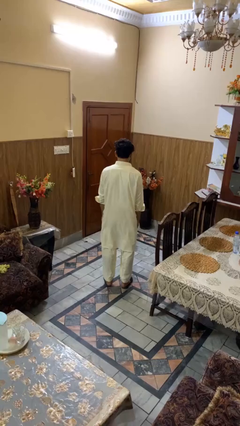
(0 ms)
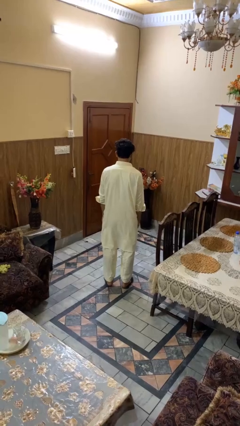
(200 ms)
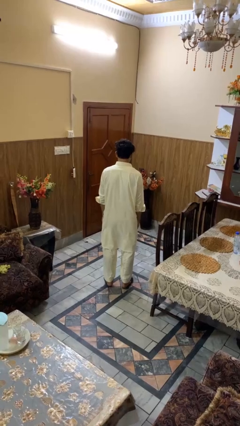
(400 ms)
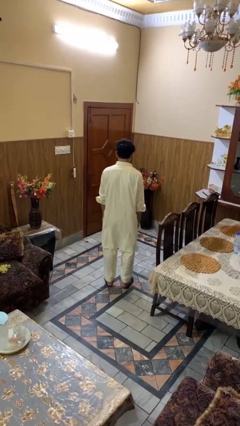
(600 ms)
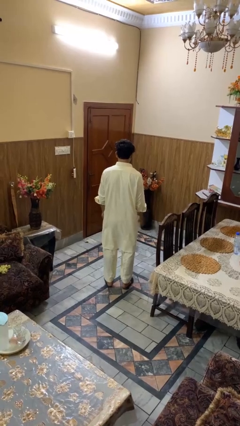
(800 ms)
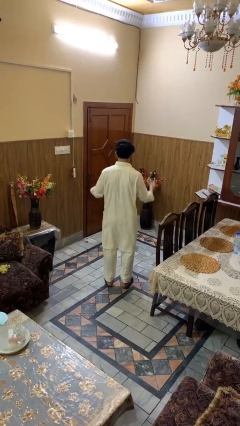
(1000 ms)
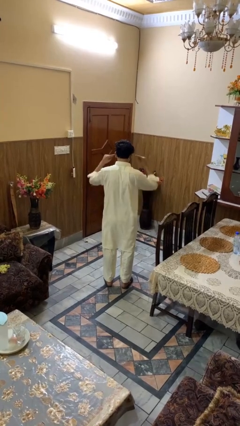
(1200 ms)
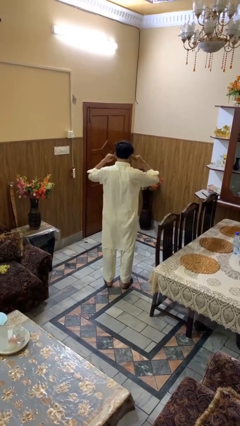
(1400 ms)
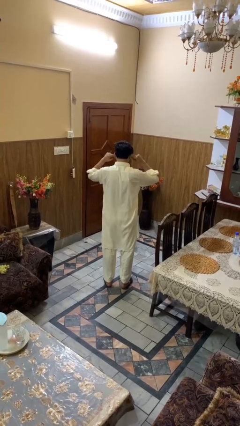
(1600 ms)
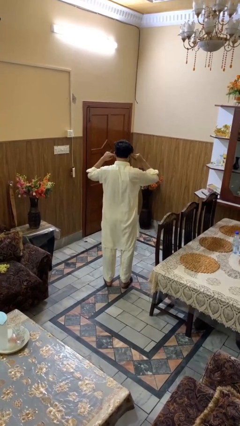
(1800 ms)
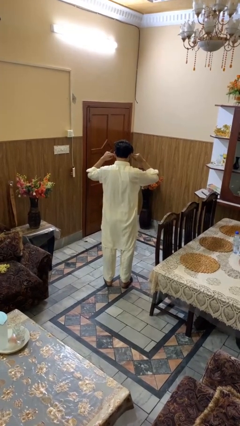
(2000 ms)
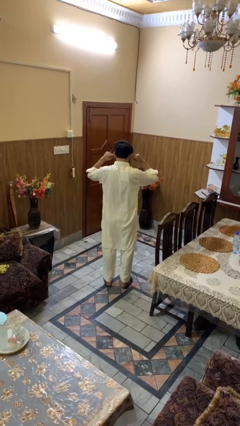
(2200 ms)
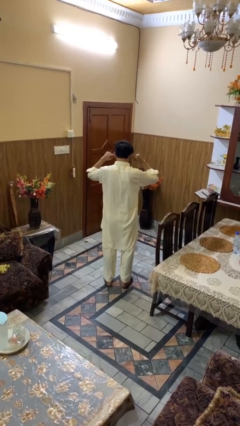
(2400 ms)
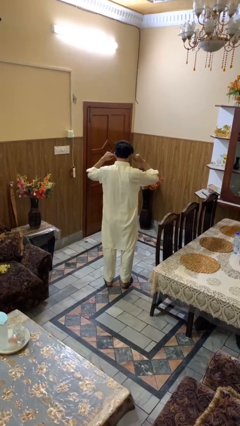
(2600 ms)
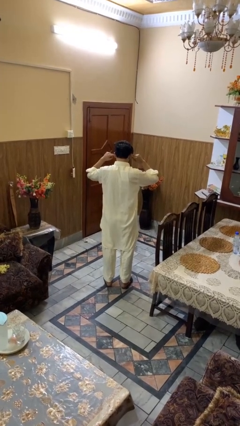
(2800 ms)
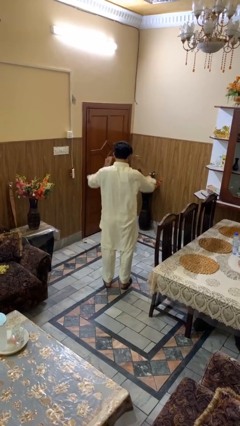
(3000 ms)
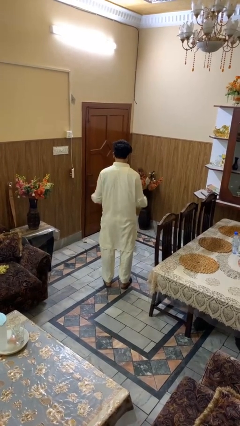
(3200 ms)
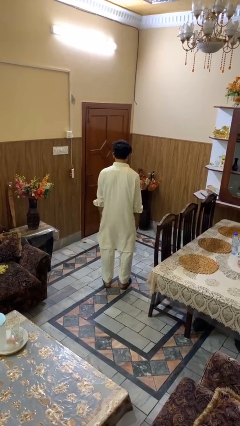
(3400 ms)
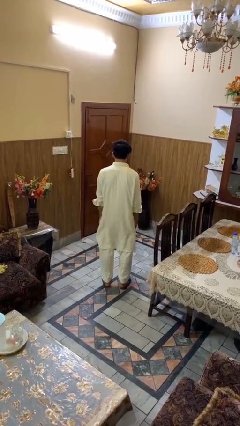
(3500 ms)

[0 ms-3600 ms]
person puts fingers in ear

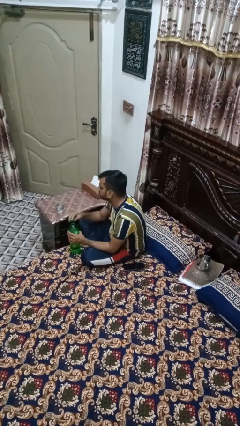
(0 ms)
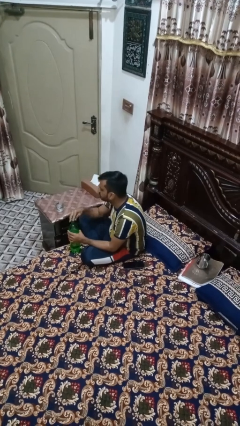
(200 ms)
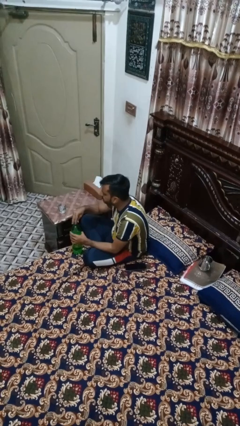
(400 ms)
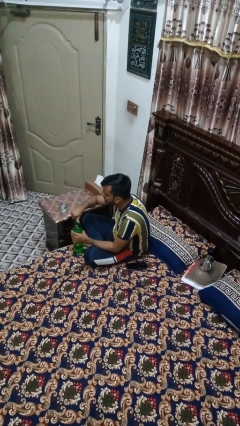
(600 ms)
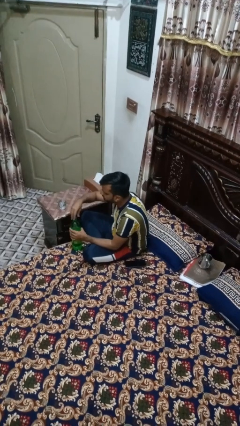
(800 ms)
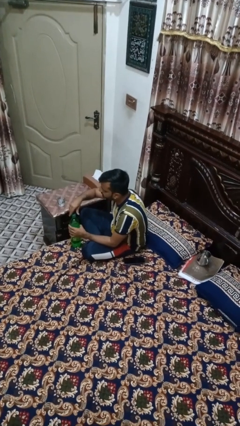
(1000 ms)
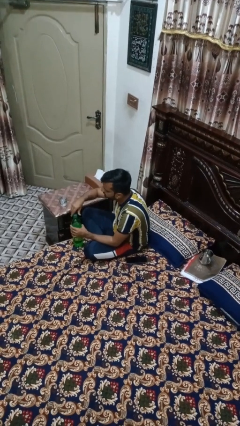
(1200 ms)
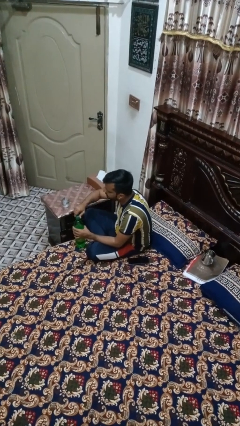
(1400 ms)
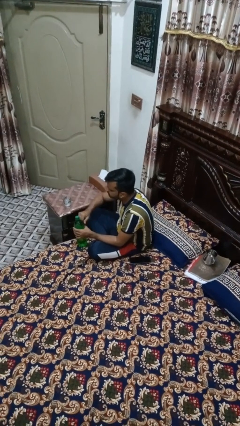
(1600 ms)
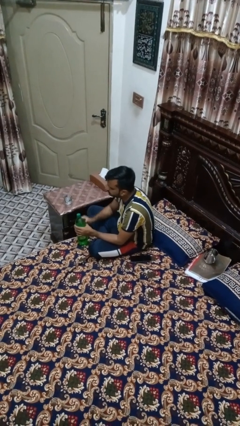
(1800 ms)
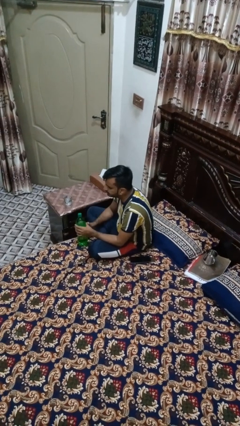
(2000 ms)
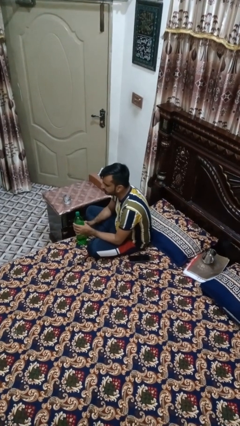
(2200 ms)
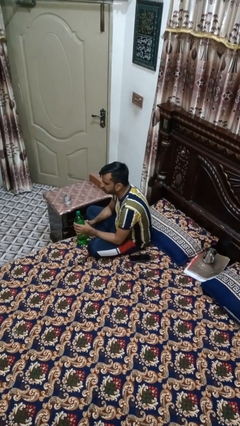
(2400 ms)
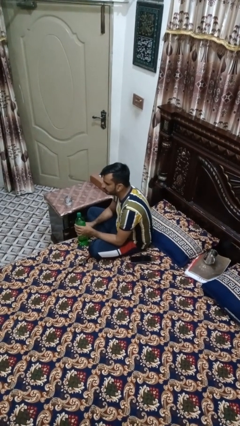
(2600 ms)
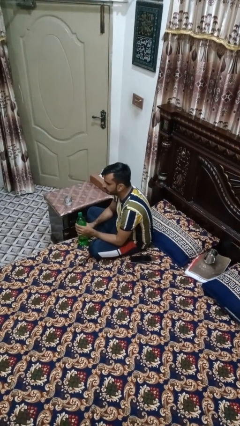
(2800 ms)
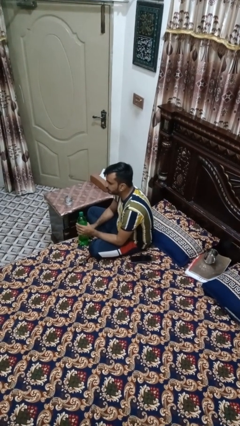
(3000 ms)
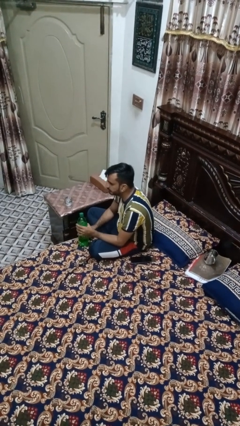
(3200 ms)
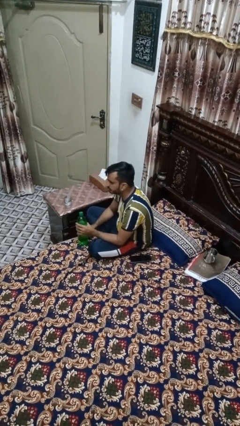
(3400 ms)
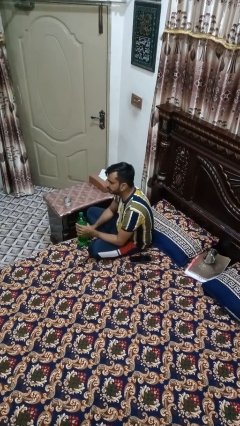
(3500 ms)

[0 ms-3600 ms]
person screws lid to bottle

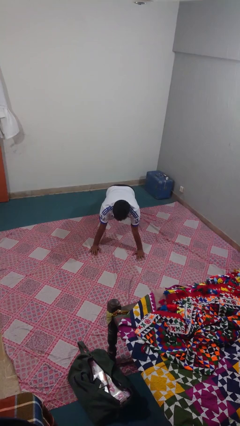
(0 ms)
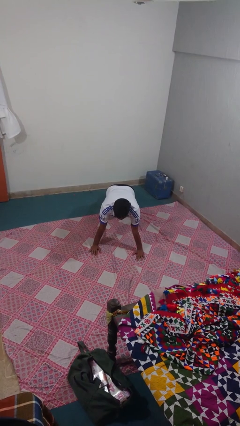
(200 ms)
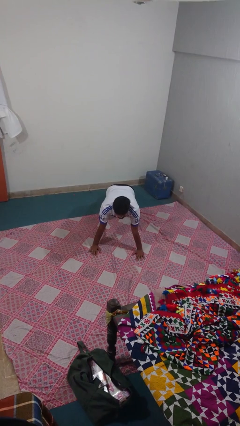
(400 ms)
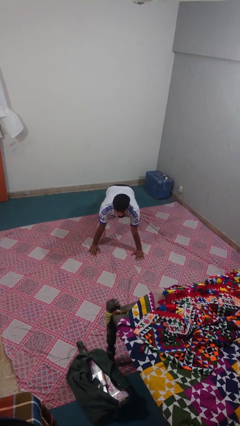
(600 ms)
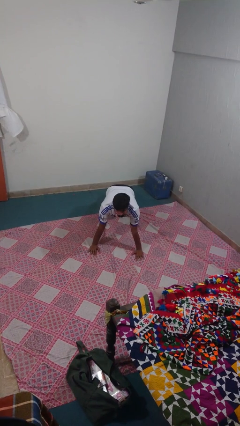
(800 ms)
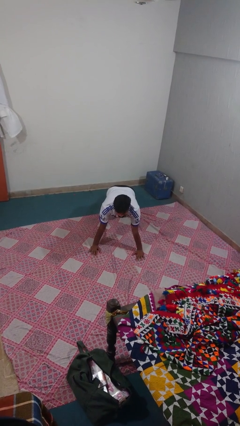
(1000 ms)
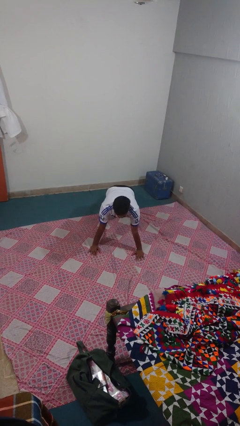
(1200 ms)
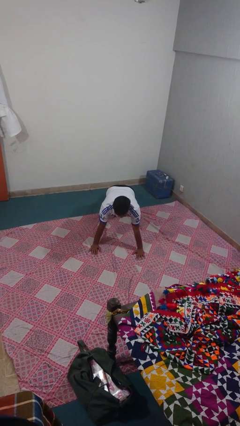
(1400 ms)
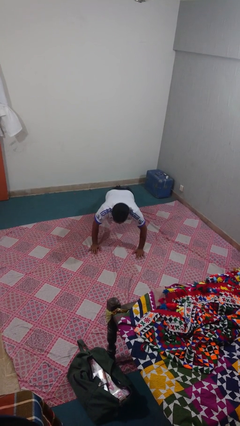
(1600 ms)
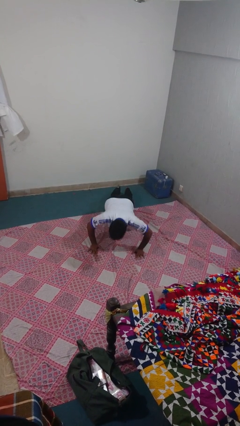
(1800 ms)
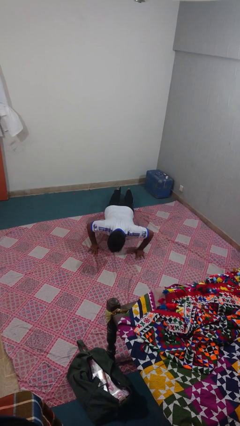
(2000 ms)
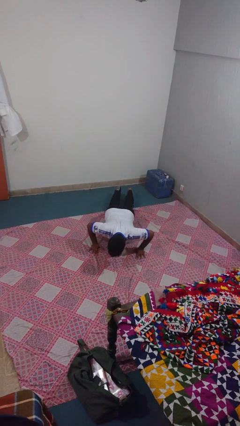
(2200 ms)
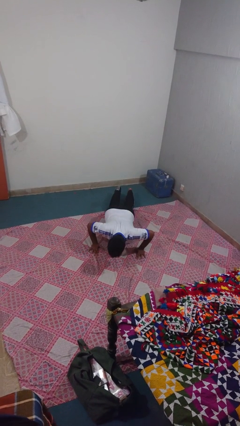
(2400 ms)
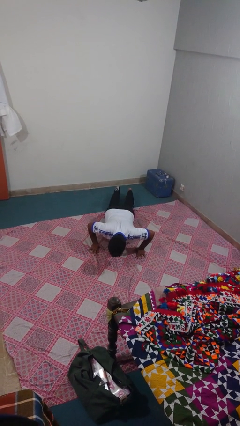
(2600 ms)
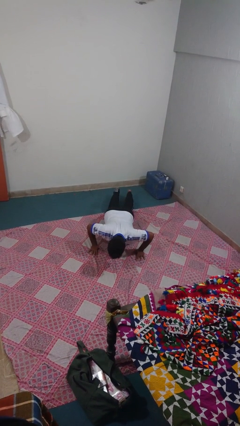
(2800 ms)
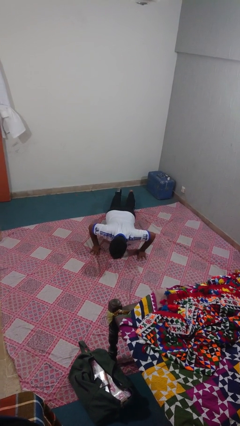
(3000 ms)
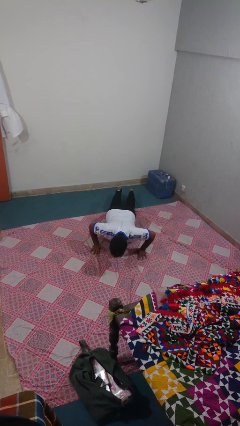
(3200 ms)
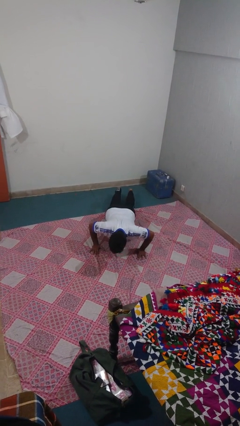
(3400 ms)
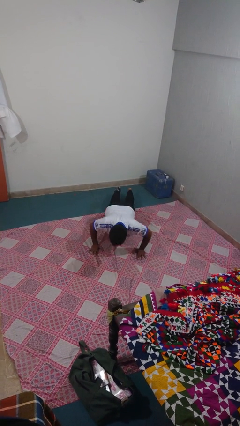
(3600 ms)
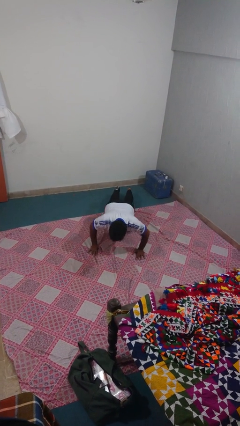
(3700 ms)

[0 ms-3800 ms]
person exercises with pushup

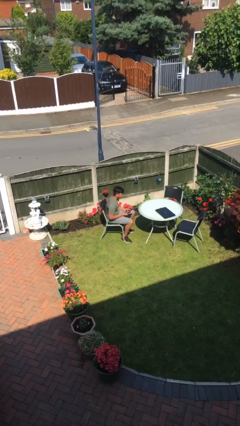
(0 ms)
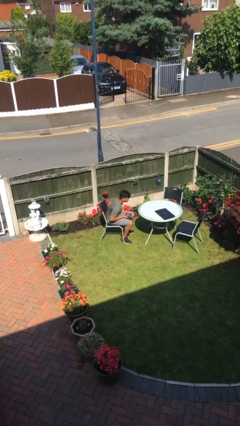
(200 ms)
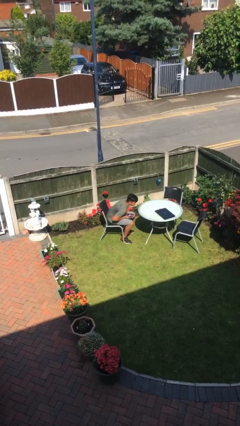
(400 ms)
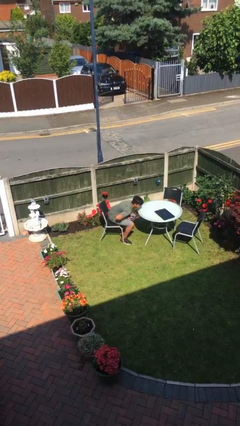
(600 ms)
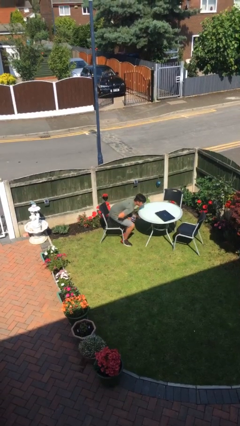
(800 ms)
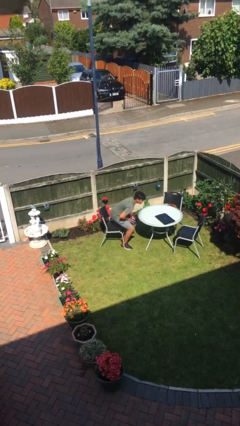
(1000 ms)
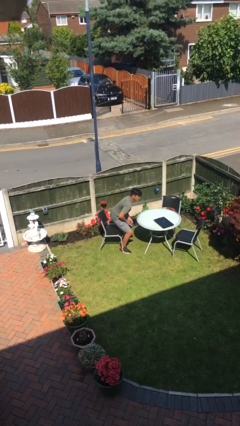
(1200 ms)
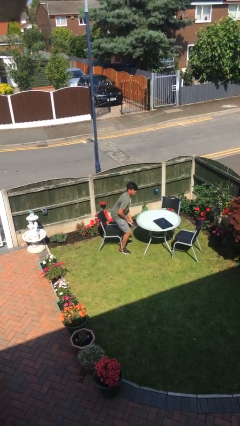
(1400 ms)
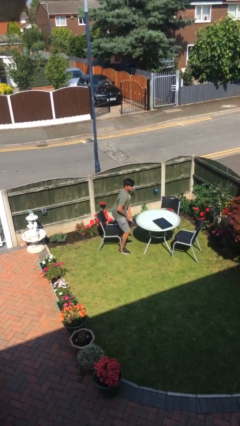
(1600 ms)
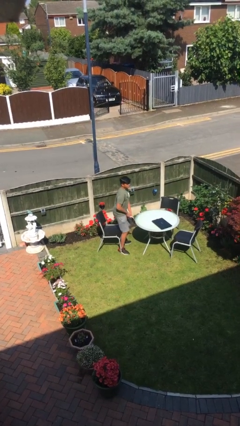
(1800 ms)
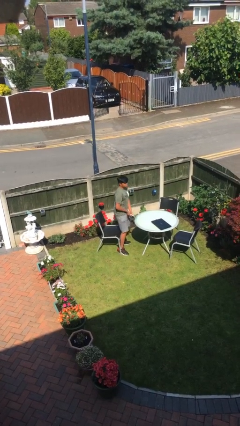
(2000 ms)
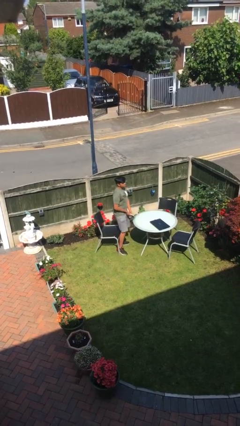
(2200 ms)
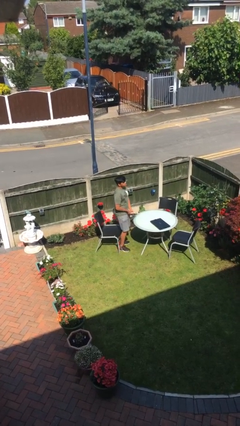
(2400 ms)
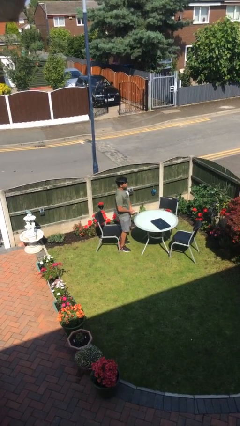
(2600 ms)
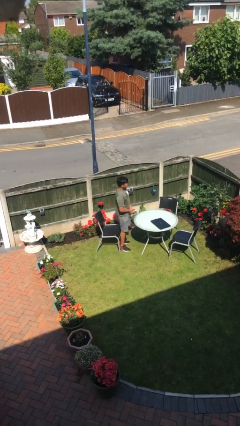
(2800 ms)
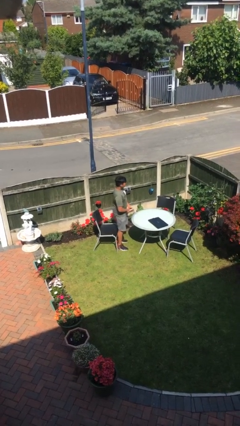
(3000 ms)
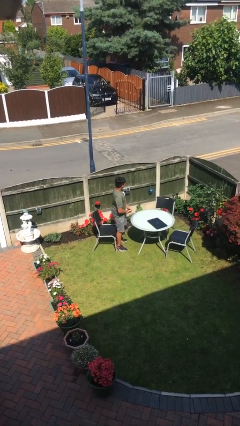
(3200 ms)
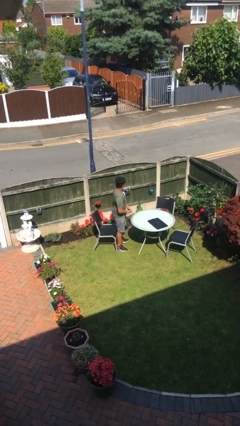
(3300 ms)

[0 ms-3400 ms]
person stands up

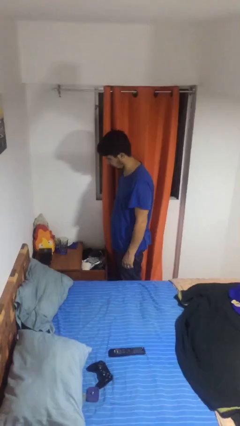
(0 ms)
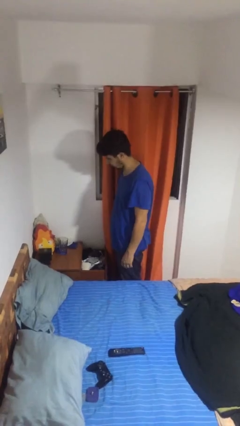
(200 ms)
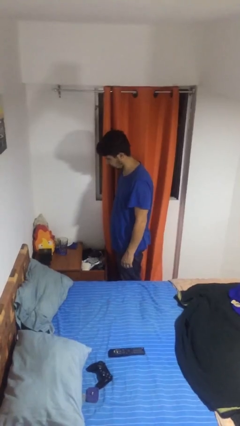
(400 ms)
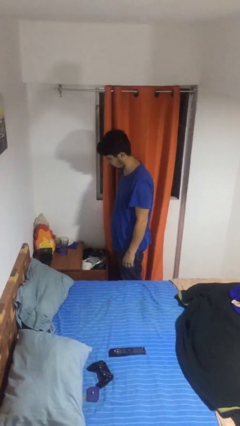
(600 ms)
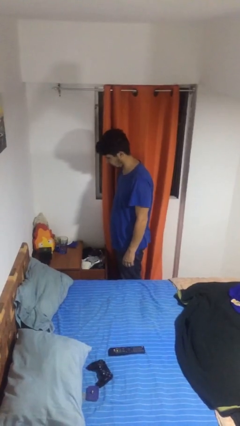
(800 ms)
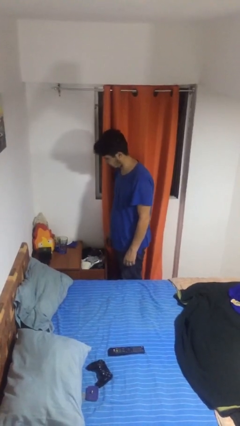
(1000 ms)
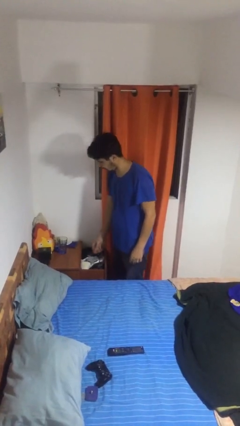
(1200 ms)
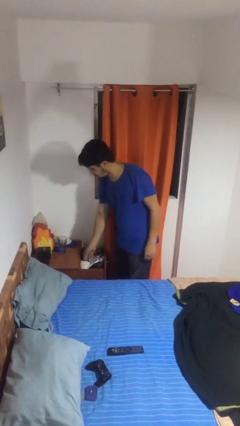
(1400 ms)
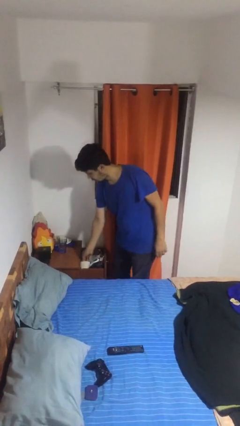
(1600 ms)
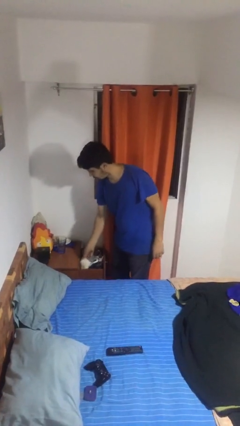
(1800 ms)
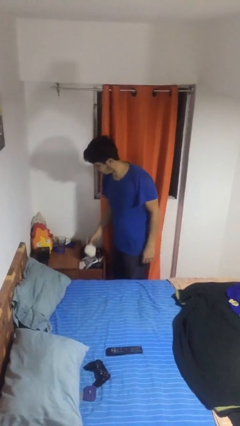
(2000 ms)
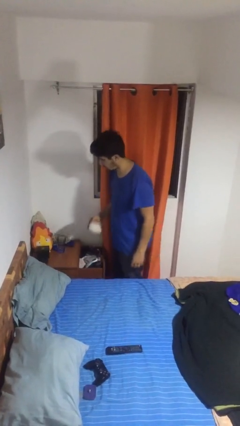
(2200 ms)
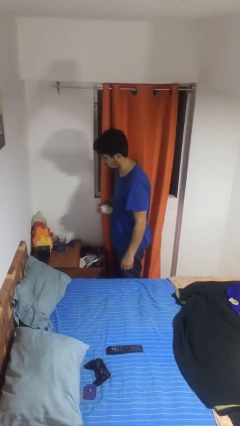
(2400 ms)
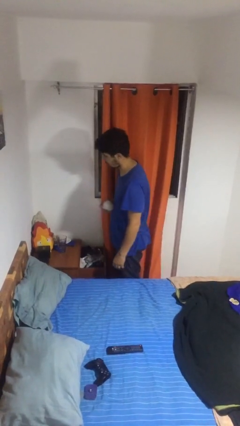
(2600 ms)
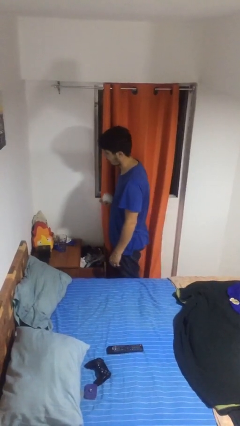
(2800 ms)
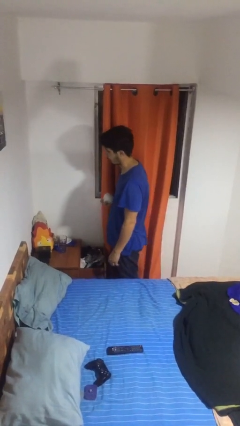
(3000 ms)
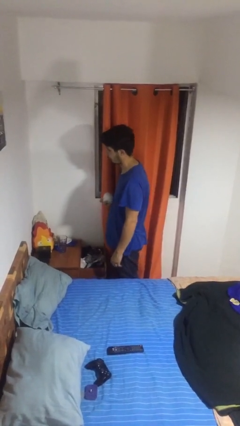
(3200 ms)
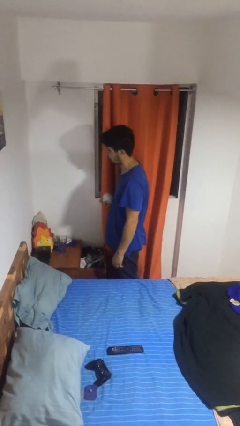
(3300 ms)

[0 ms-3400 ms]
person takes clothes from dresser
